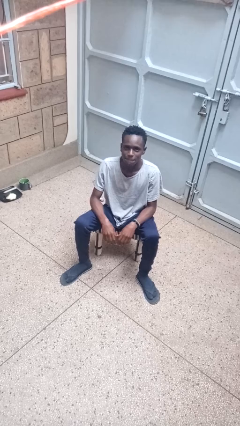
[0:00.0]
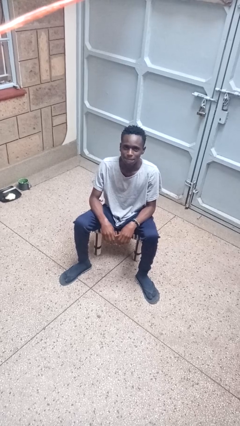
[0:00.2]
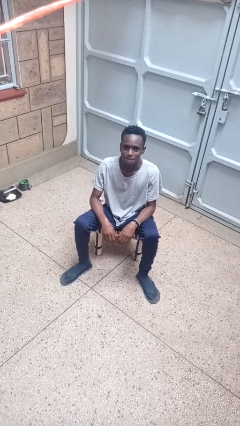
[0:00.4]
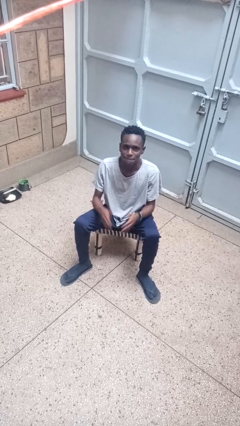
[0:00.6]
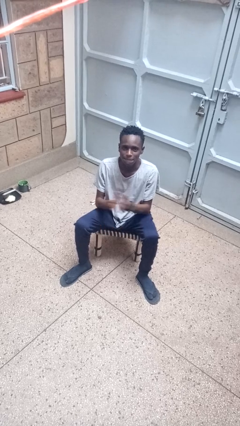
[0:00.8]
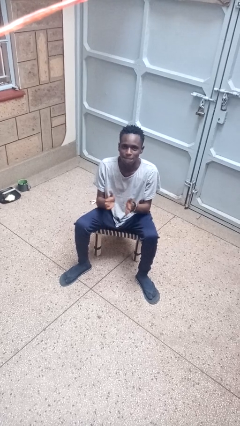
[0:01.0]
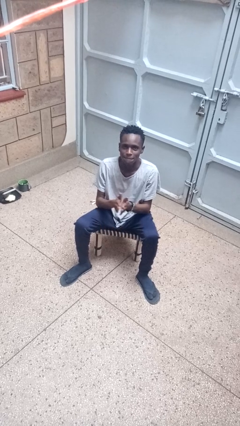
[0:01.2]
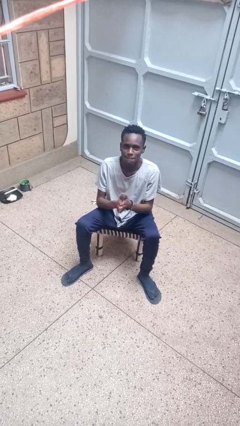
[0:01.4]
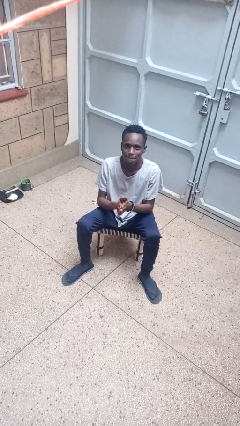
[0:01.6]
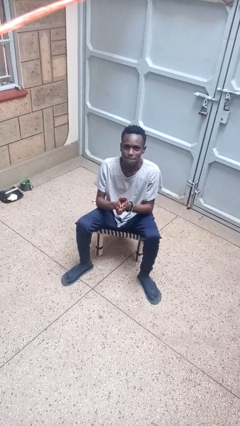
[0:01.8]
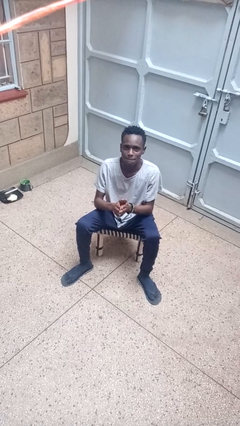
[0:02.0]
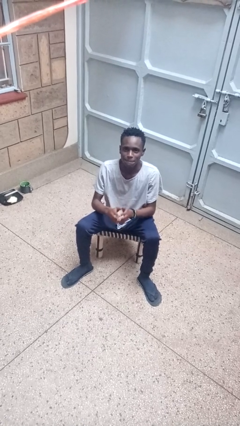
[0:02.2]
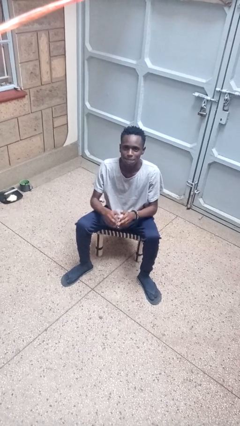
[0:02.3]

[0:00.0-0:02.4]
person claps hands

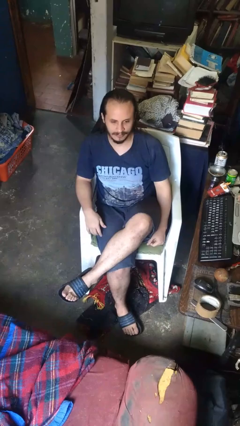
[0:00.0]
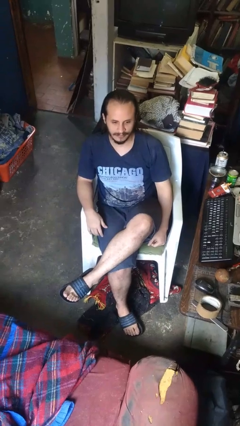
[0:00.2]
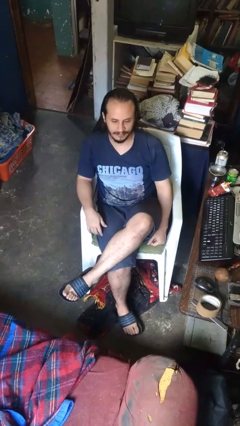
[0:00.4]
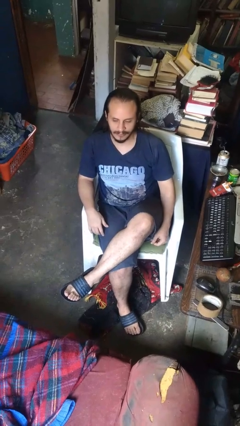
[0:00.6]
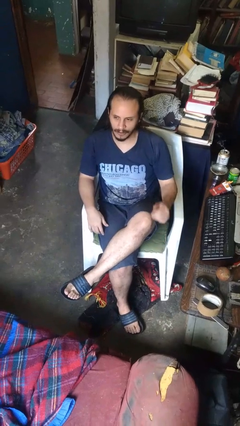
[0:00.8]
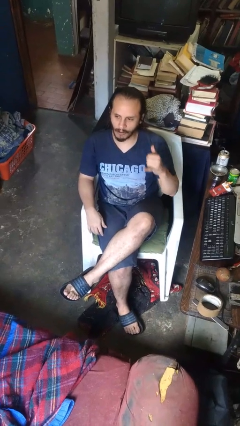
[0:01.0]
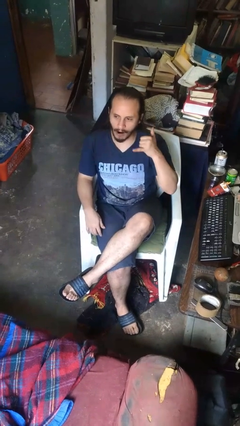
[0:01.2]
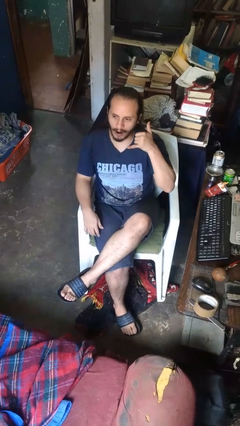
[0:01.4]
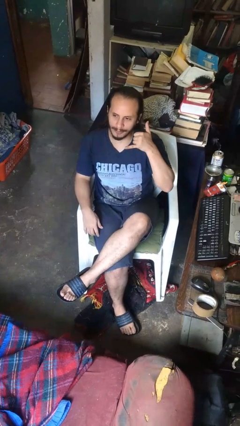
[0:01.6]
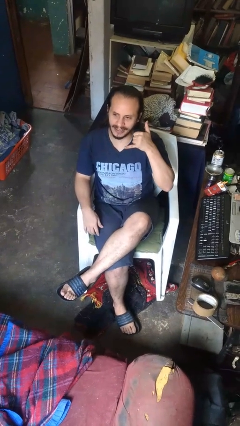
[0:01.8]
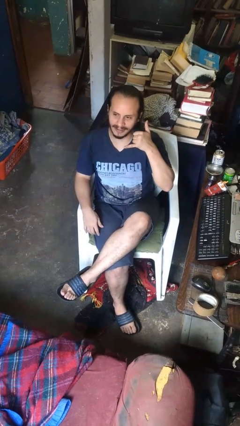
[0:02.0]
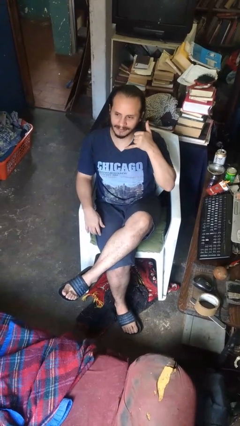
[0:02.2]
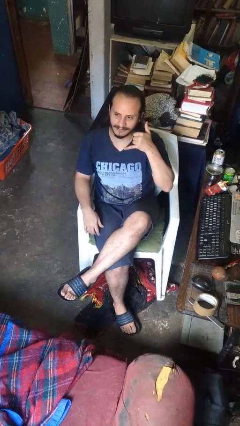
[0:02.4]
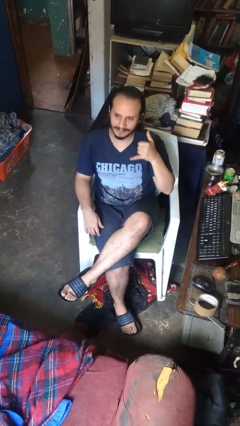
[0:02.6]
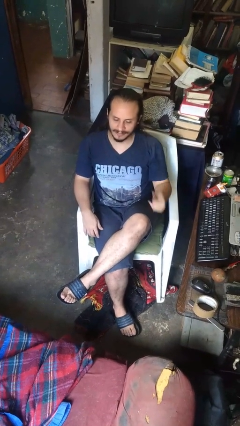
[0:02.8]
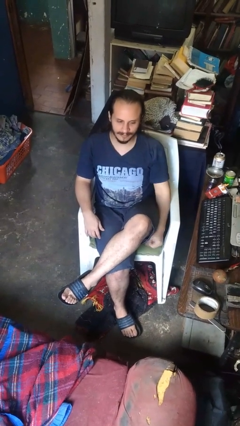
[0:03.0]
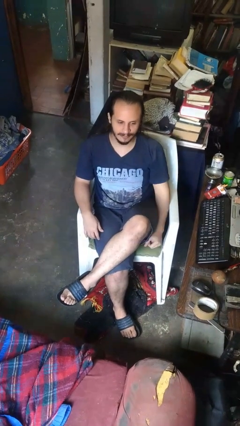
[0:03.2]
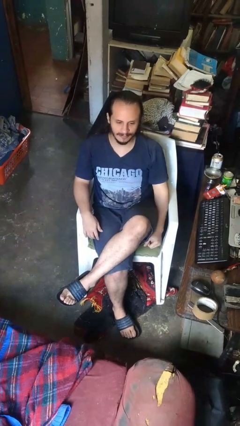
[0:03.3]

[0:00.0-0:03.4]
person gestures call me

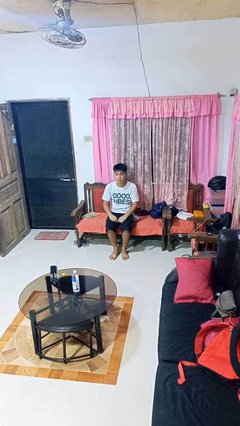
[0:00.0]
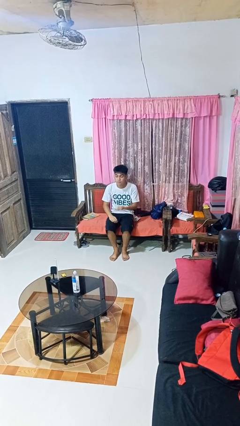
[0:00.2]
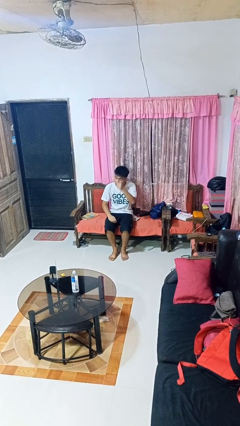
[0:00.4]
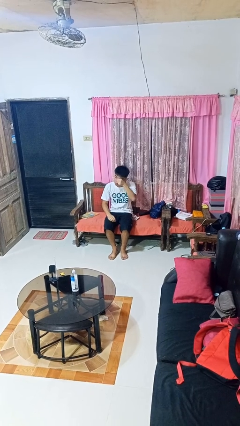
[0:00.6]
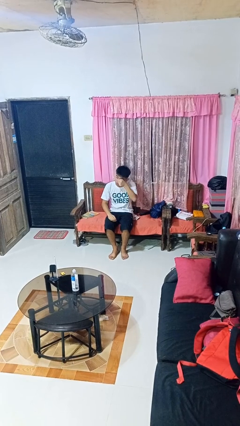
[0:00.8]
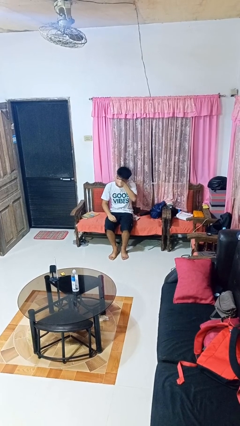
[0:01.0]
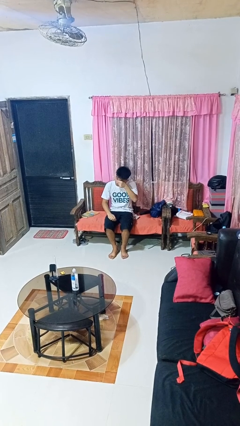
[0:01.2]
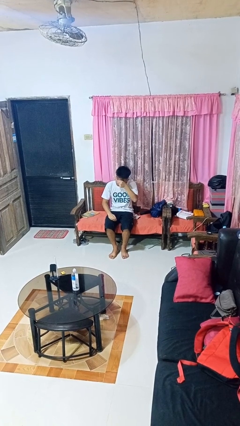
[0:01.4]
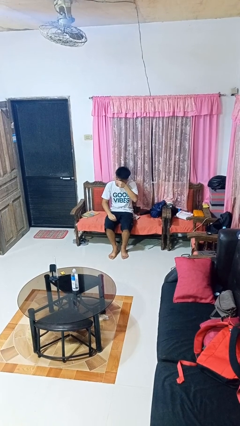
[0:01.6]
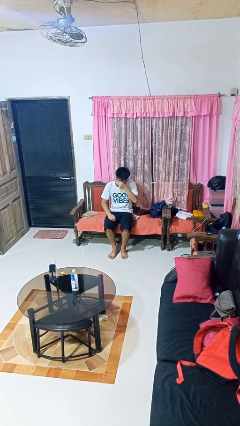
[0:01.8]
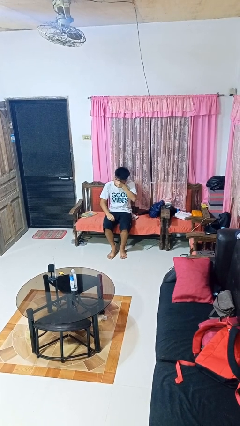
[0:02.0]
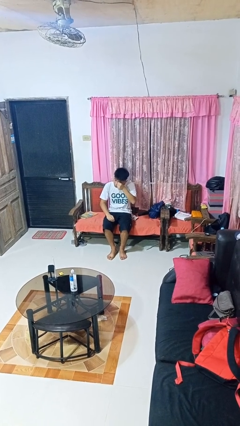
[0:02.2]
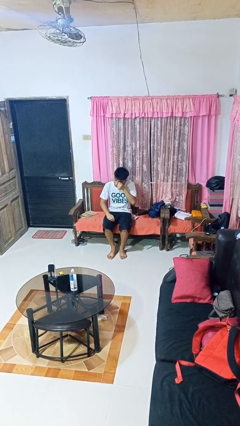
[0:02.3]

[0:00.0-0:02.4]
person rubs eyes

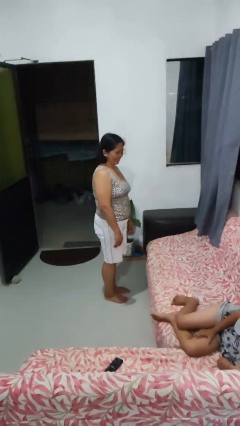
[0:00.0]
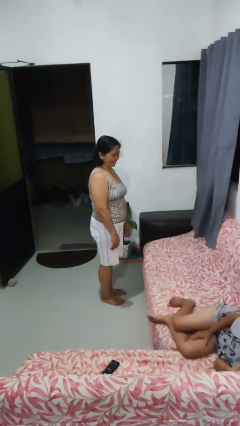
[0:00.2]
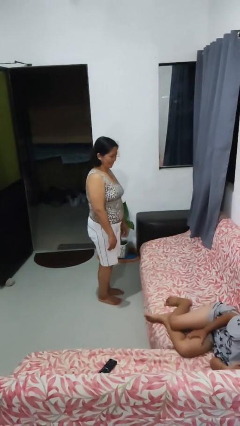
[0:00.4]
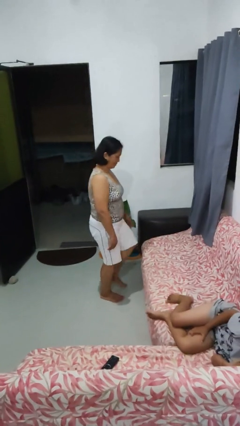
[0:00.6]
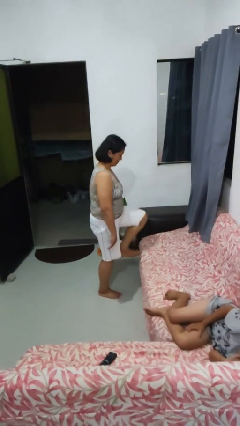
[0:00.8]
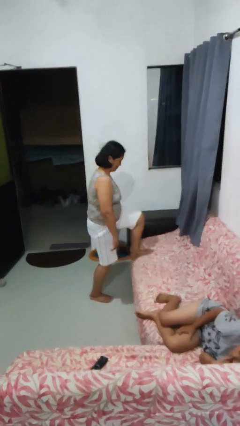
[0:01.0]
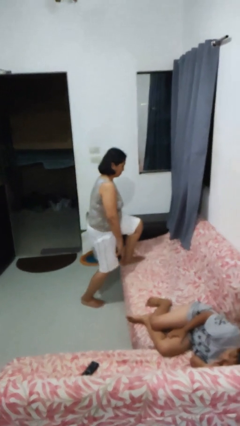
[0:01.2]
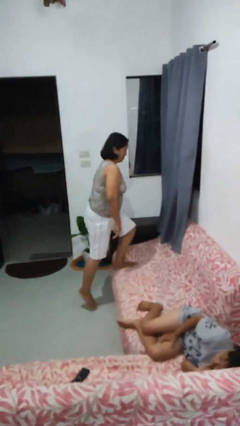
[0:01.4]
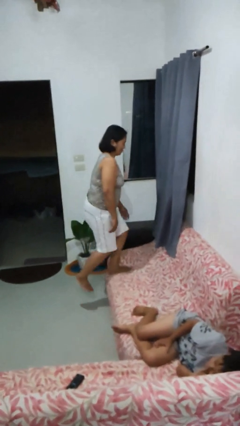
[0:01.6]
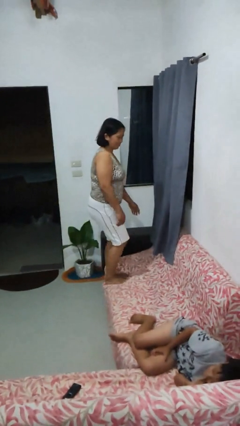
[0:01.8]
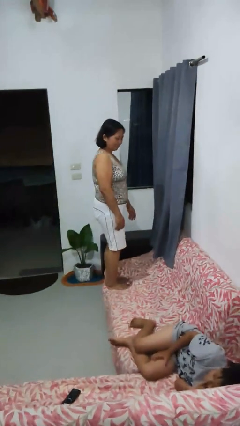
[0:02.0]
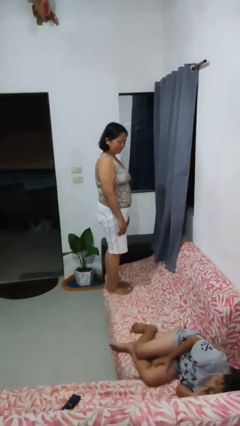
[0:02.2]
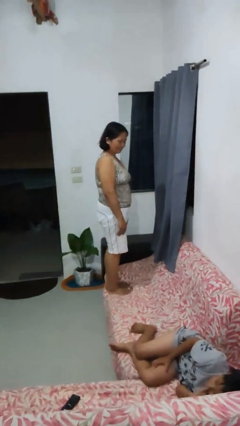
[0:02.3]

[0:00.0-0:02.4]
person climbs on couch

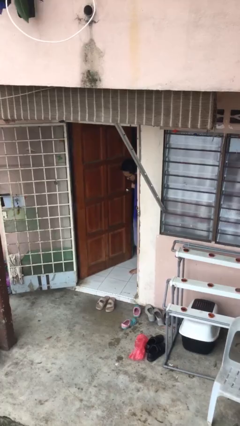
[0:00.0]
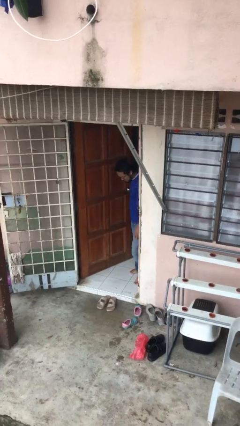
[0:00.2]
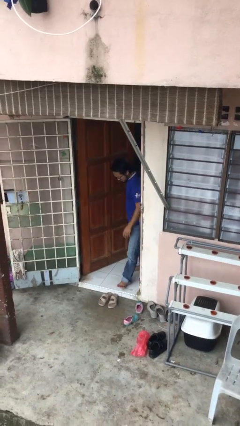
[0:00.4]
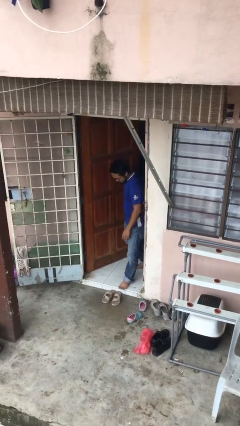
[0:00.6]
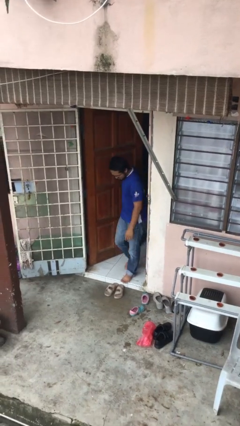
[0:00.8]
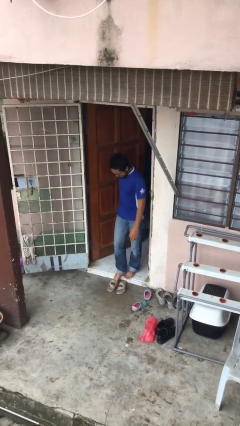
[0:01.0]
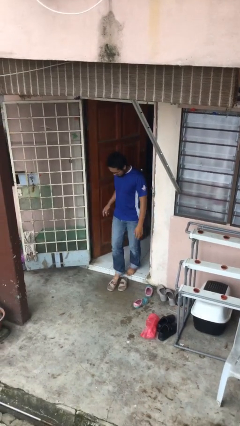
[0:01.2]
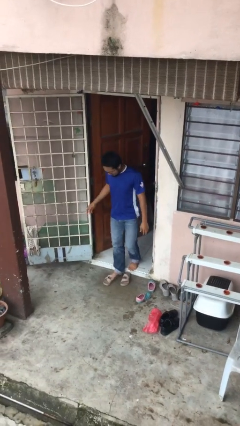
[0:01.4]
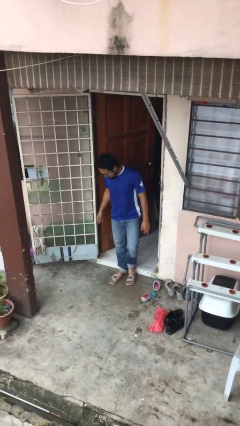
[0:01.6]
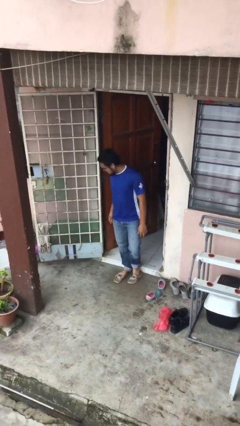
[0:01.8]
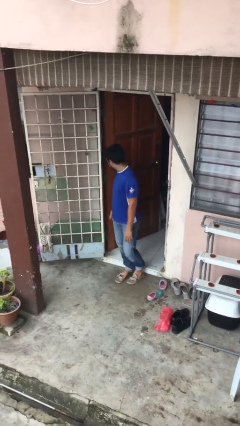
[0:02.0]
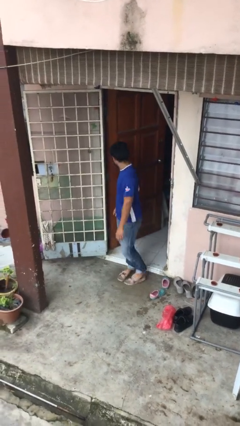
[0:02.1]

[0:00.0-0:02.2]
person enters scene through structure

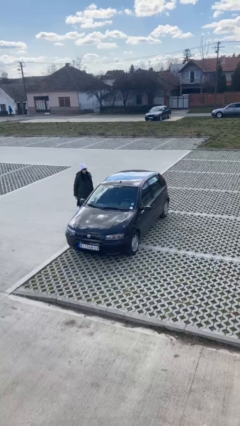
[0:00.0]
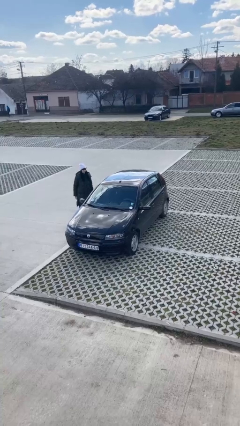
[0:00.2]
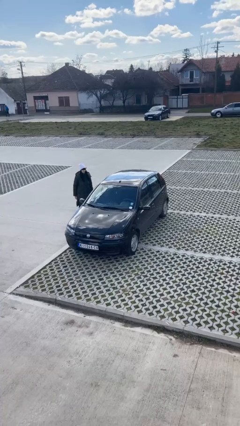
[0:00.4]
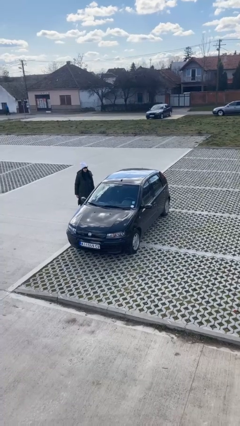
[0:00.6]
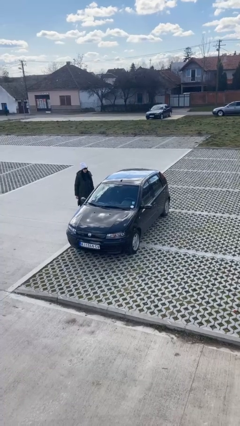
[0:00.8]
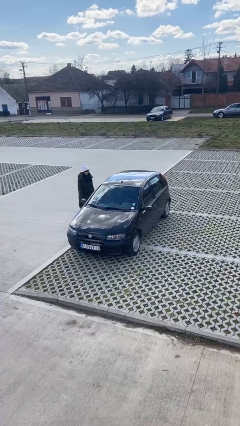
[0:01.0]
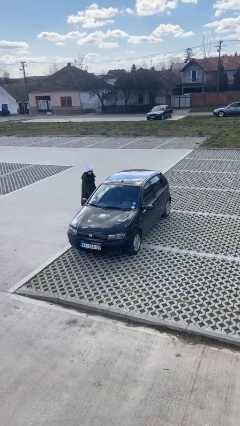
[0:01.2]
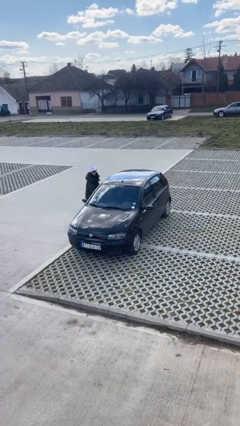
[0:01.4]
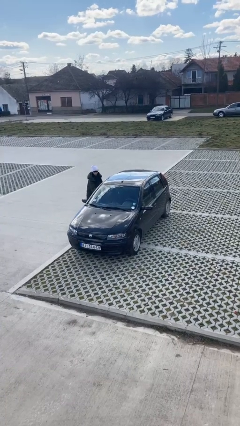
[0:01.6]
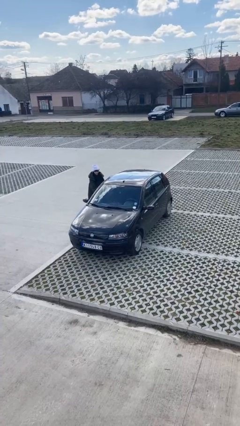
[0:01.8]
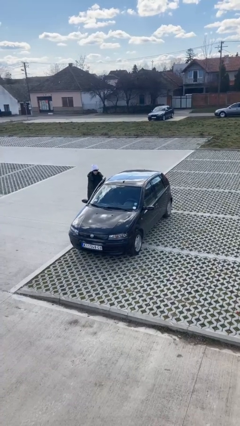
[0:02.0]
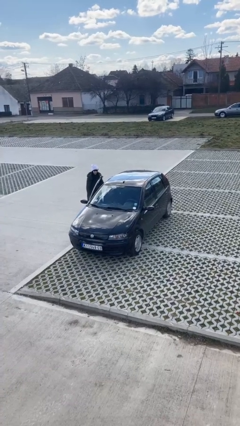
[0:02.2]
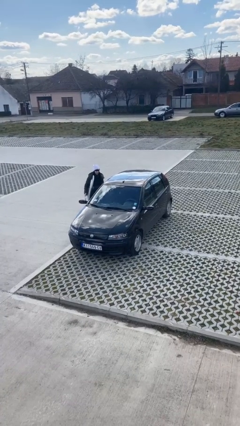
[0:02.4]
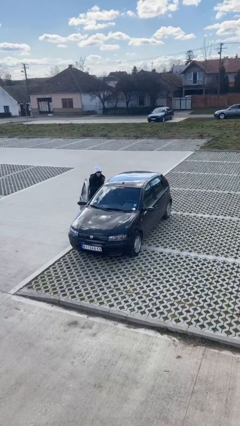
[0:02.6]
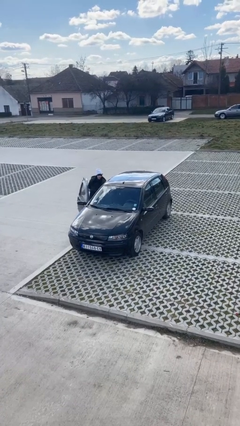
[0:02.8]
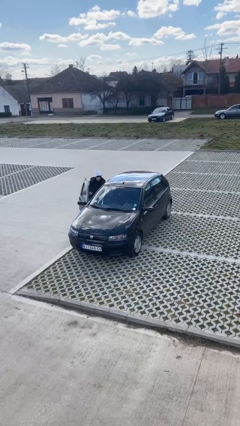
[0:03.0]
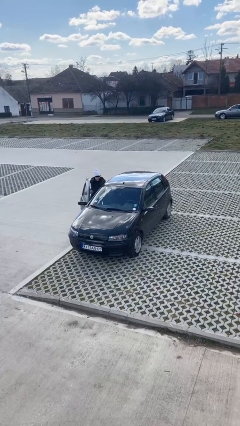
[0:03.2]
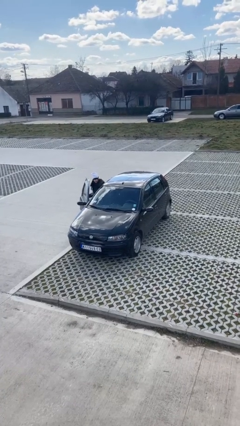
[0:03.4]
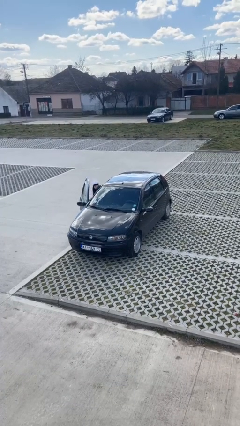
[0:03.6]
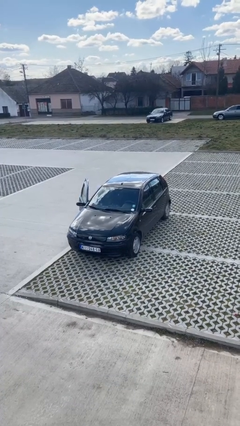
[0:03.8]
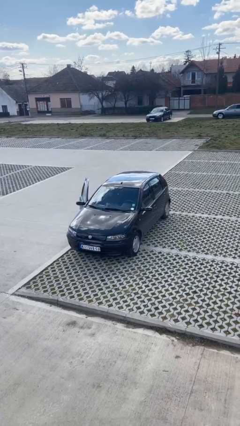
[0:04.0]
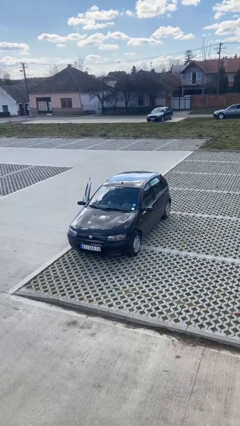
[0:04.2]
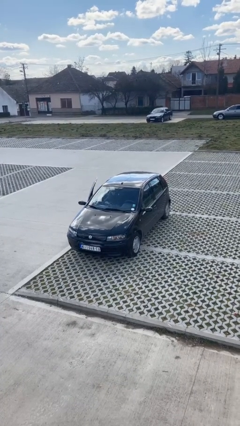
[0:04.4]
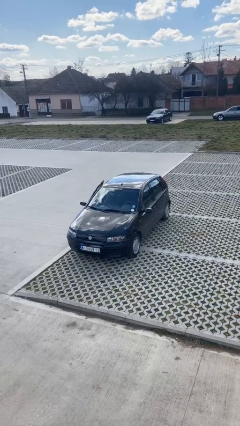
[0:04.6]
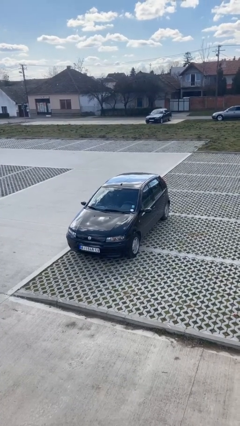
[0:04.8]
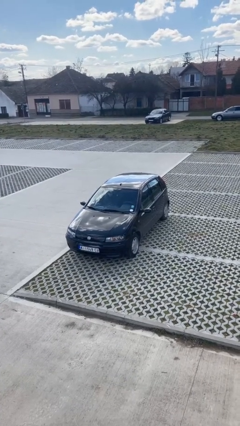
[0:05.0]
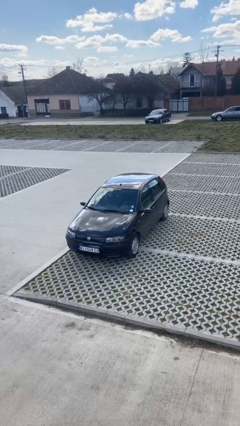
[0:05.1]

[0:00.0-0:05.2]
car picks up person
